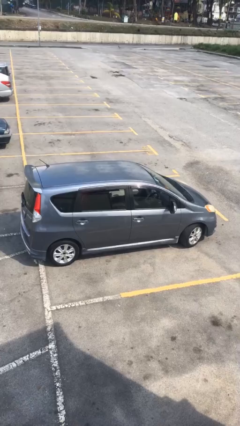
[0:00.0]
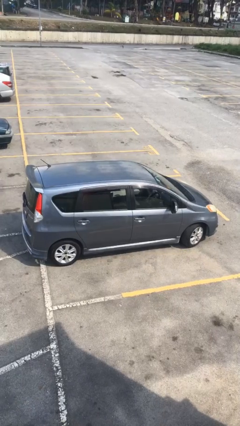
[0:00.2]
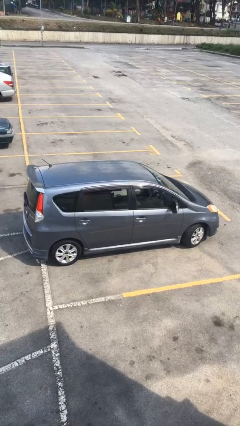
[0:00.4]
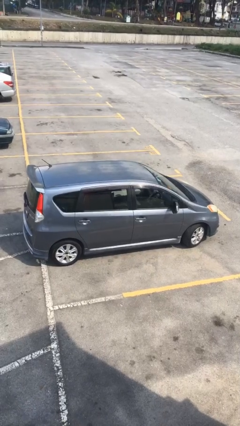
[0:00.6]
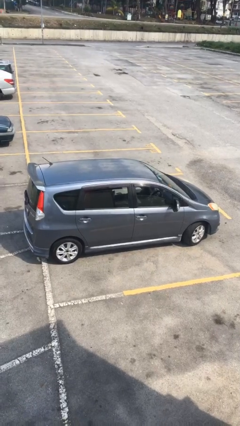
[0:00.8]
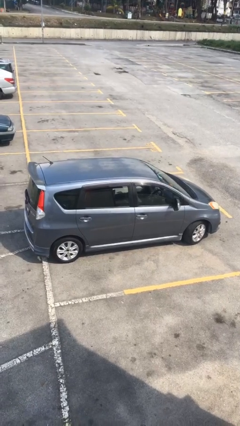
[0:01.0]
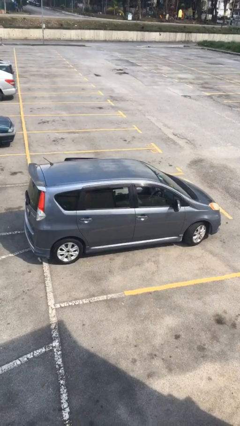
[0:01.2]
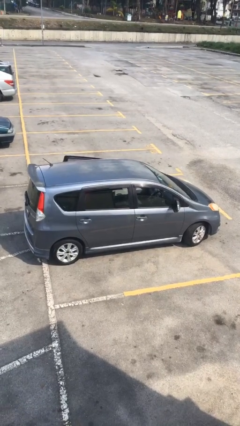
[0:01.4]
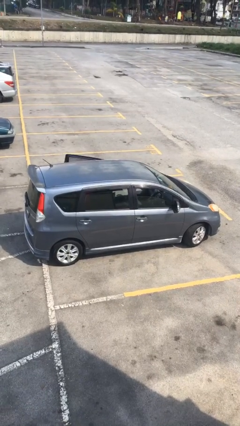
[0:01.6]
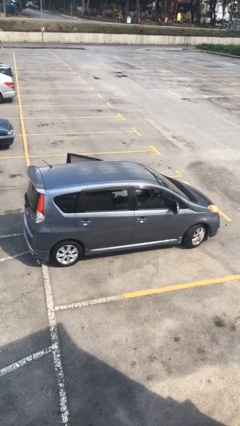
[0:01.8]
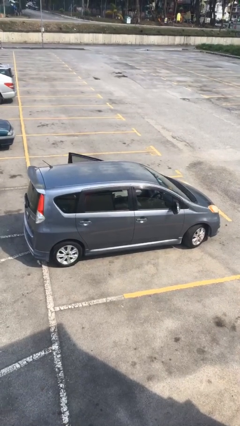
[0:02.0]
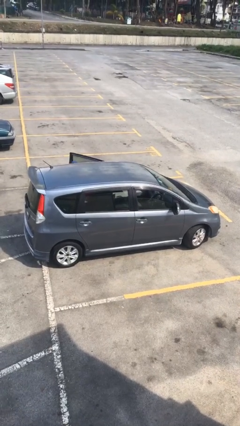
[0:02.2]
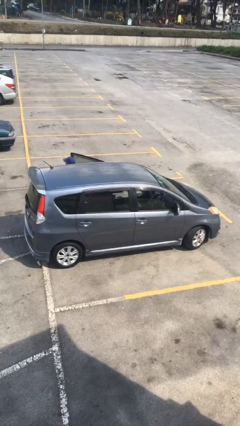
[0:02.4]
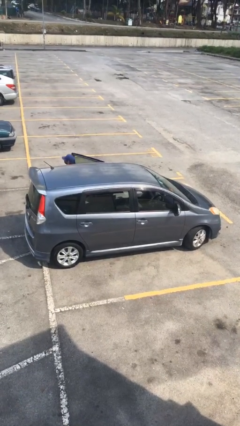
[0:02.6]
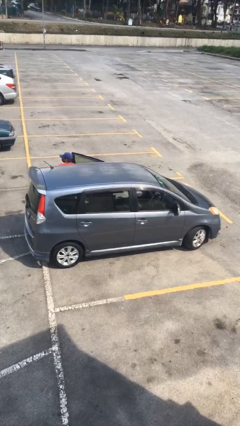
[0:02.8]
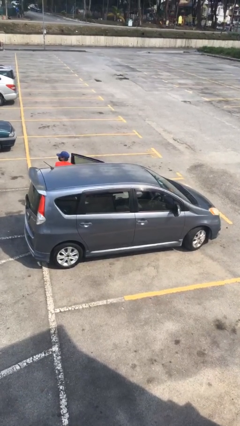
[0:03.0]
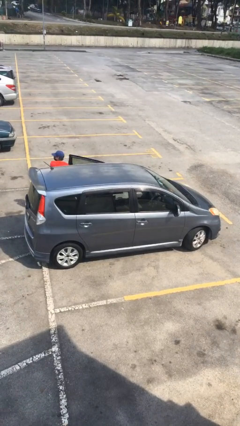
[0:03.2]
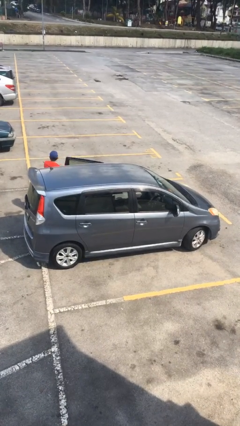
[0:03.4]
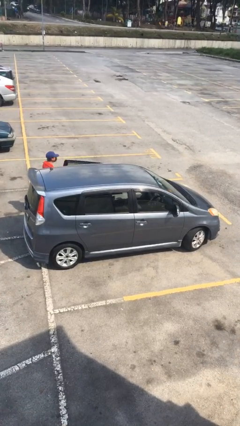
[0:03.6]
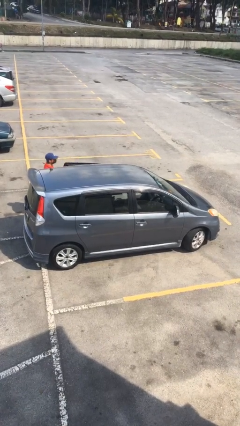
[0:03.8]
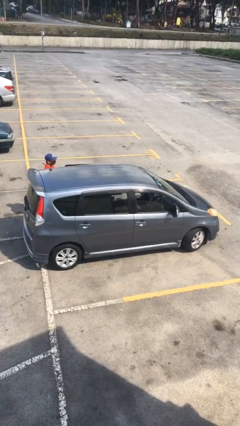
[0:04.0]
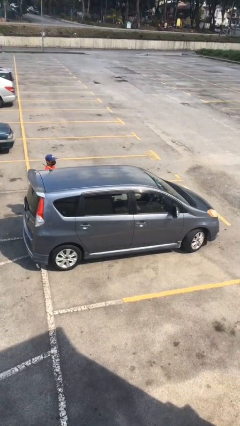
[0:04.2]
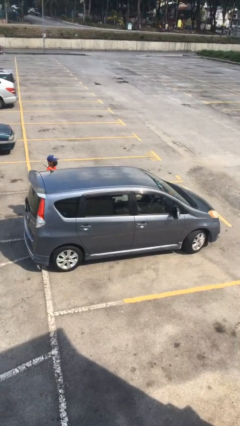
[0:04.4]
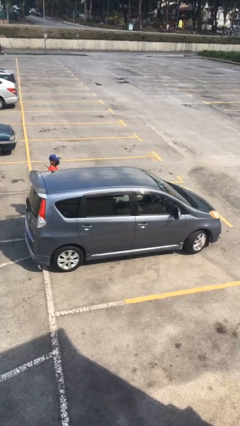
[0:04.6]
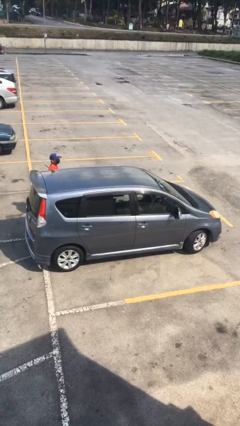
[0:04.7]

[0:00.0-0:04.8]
car drops off person

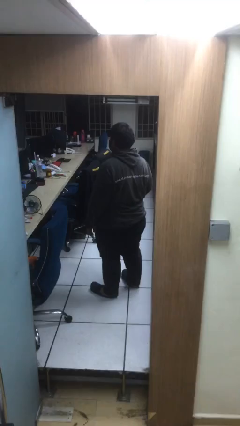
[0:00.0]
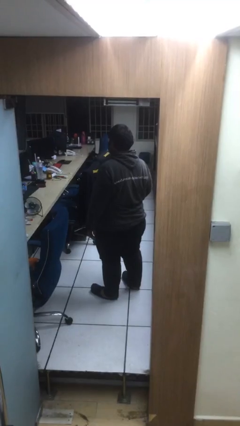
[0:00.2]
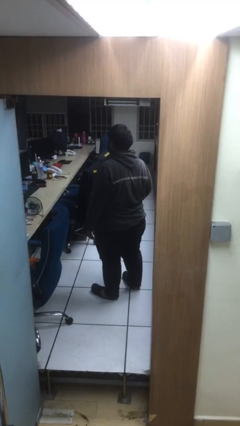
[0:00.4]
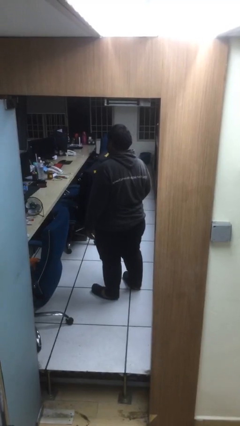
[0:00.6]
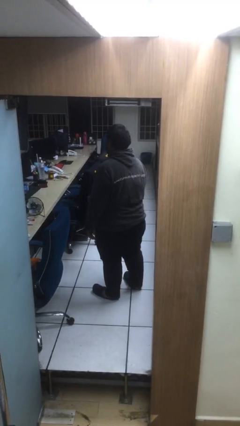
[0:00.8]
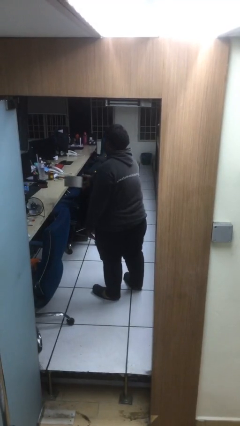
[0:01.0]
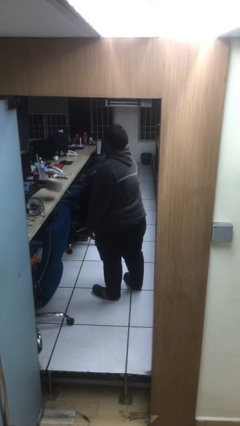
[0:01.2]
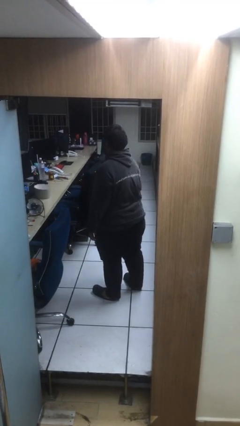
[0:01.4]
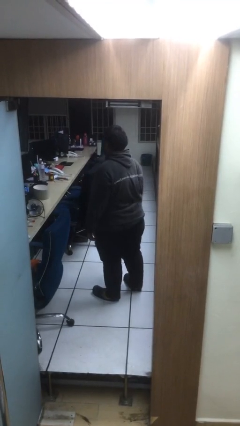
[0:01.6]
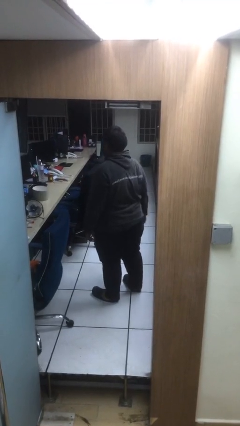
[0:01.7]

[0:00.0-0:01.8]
person throws object on table

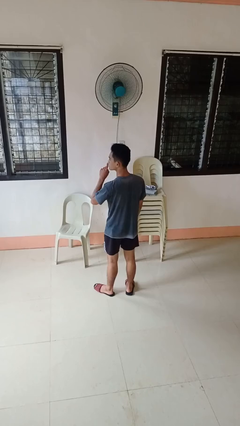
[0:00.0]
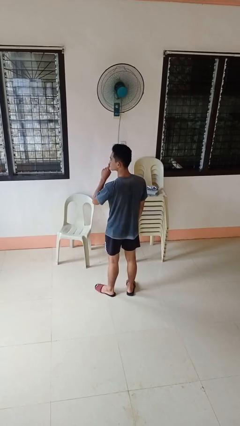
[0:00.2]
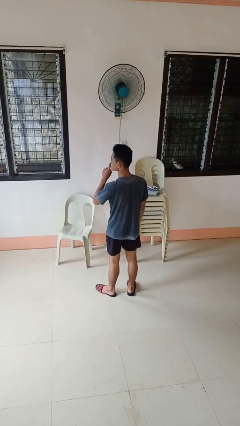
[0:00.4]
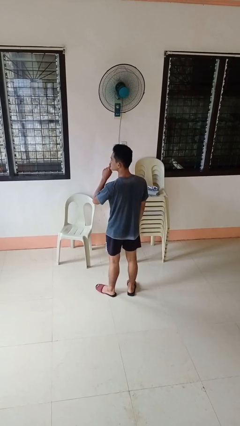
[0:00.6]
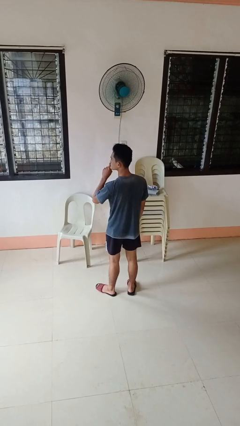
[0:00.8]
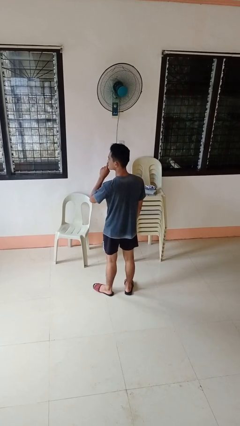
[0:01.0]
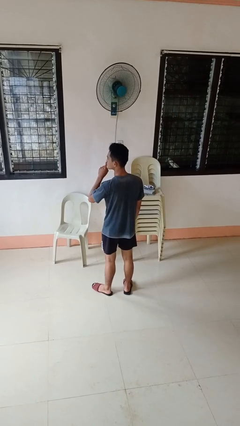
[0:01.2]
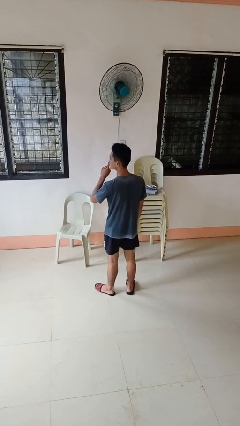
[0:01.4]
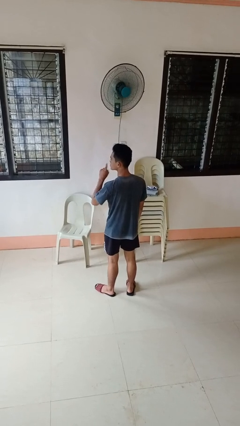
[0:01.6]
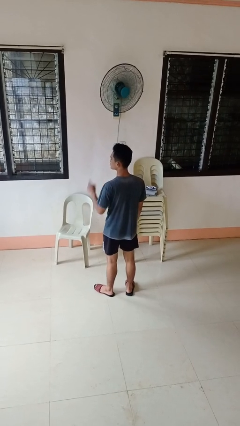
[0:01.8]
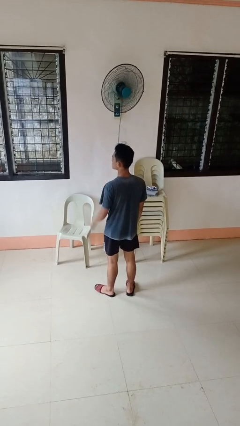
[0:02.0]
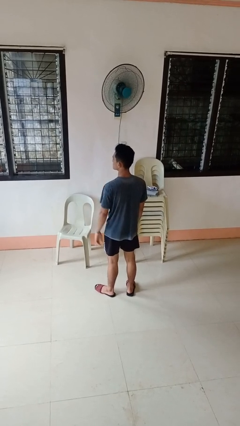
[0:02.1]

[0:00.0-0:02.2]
person gestures be quiet

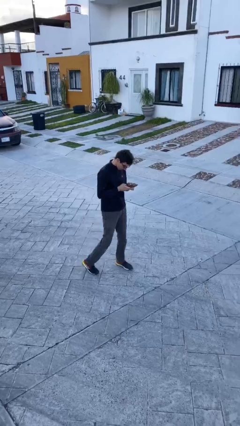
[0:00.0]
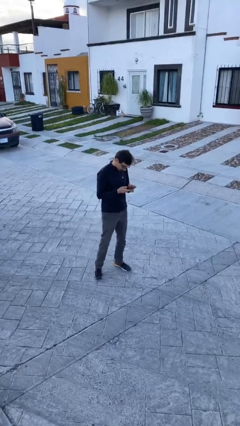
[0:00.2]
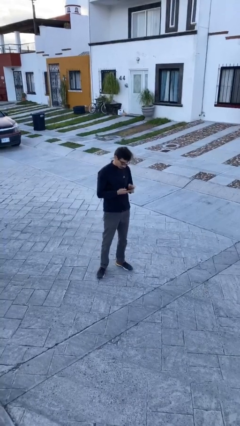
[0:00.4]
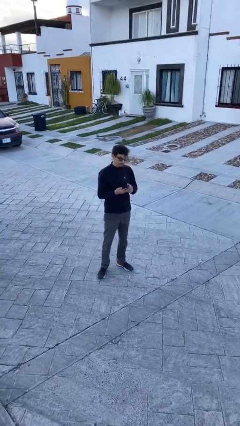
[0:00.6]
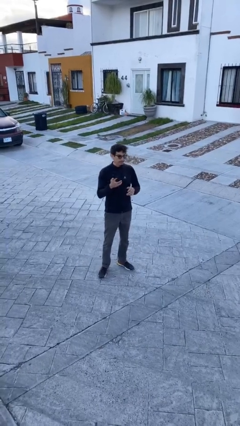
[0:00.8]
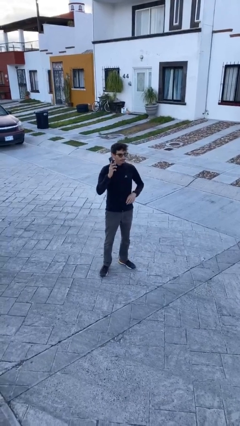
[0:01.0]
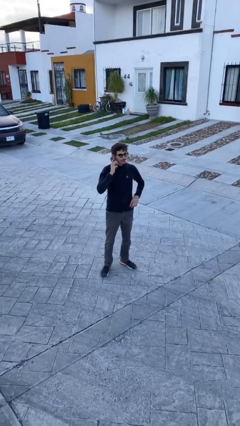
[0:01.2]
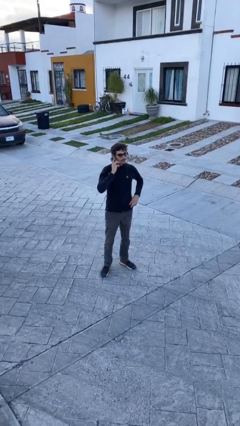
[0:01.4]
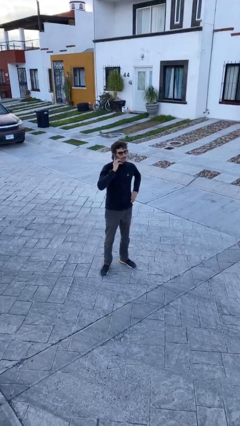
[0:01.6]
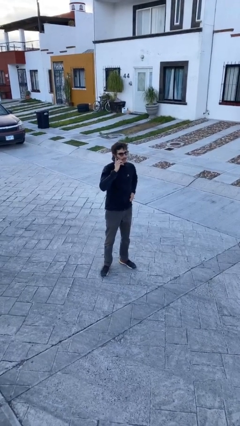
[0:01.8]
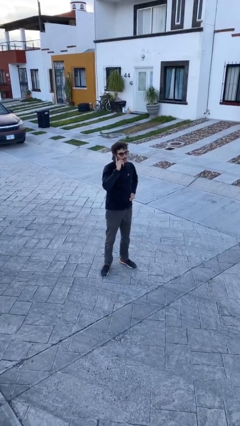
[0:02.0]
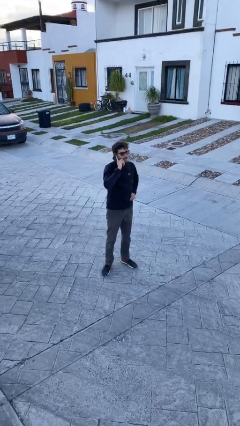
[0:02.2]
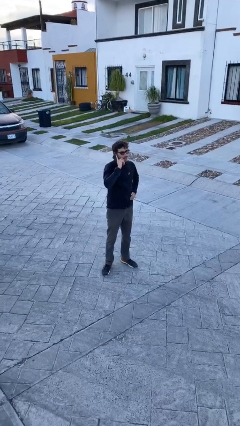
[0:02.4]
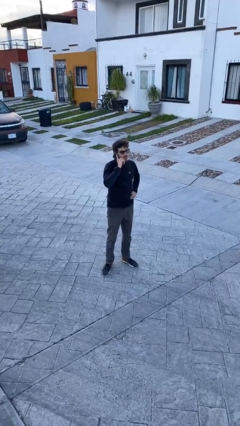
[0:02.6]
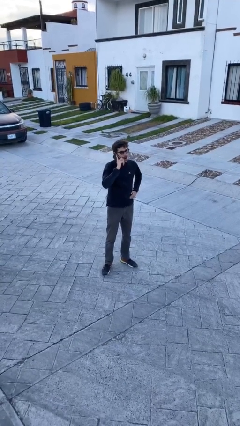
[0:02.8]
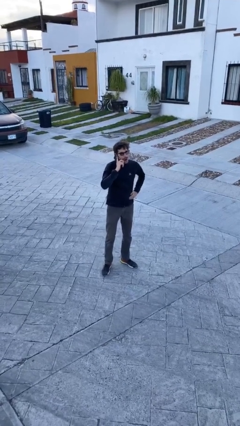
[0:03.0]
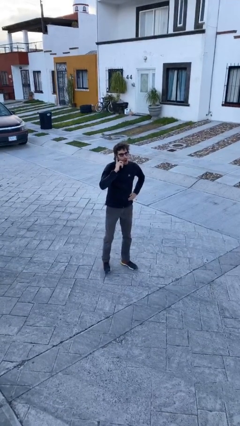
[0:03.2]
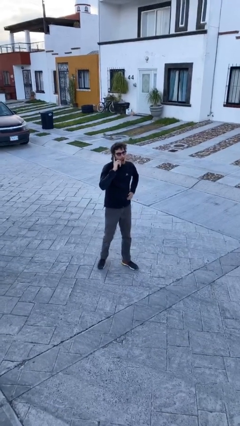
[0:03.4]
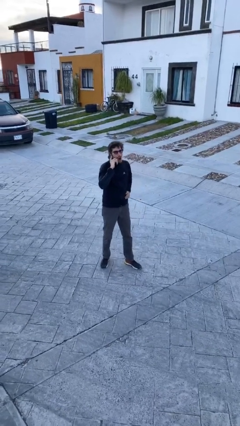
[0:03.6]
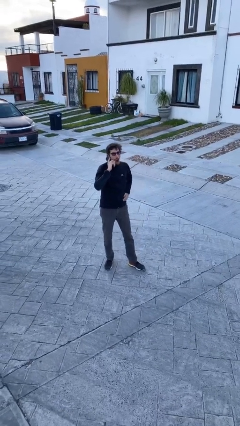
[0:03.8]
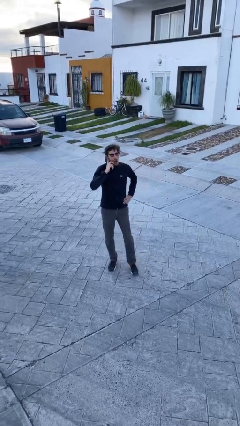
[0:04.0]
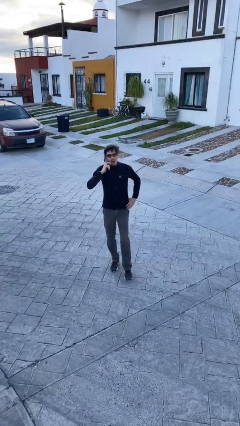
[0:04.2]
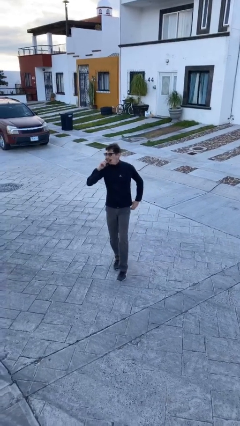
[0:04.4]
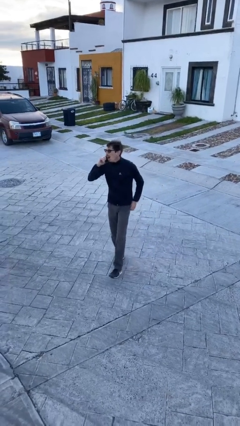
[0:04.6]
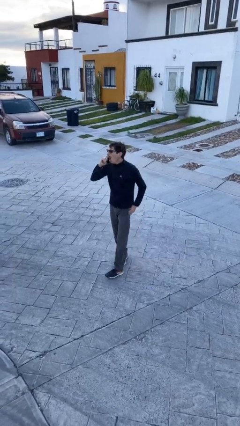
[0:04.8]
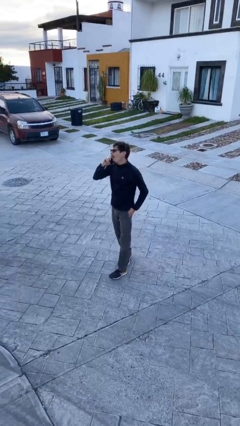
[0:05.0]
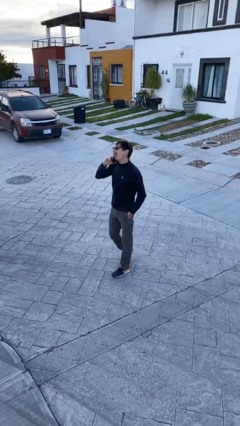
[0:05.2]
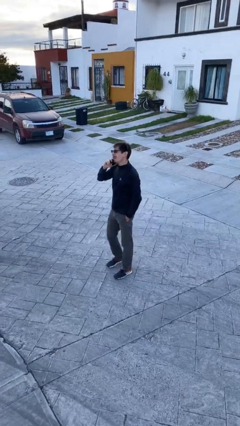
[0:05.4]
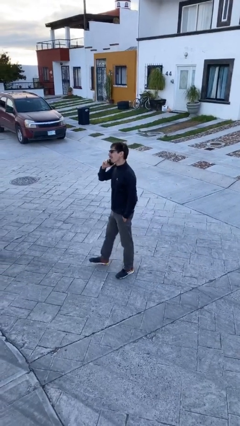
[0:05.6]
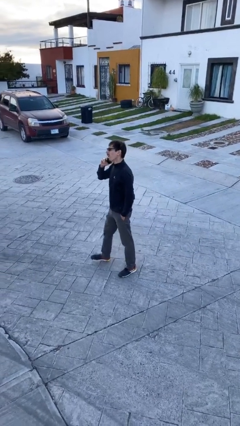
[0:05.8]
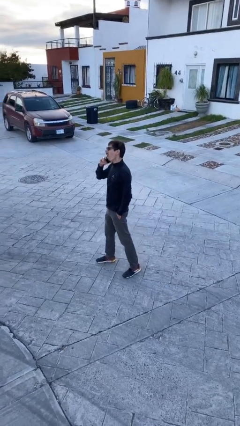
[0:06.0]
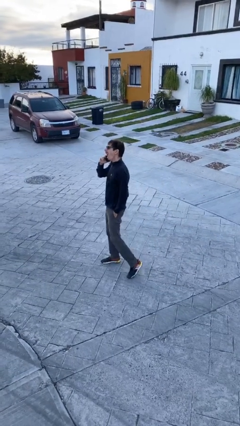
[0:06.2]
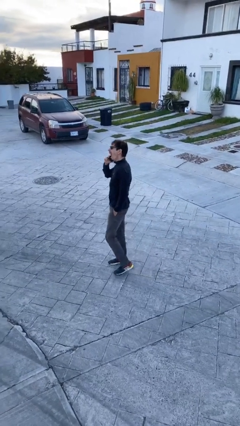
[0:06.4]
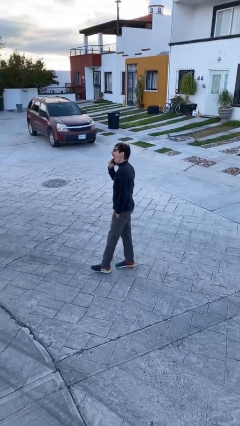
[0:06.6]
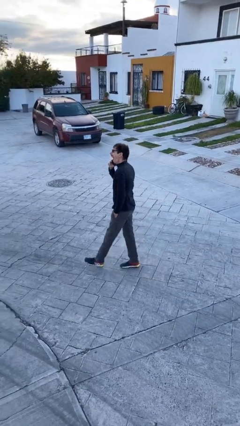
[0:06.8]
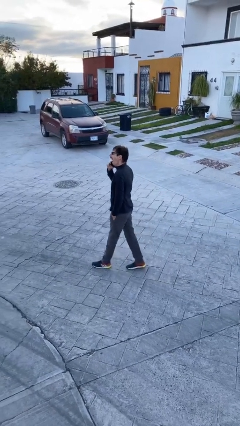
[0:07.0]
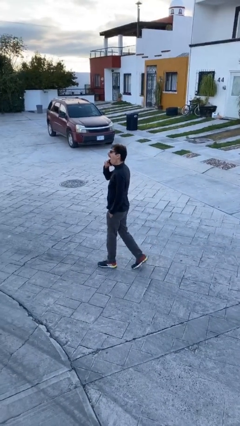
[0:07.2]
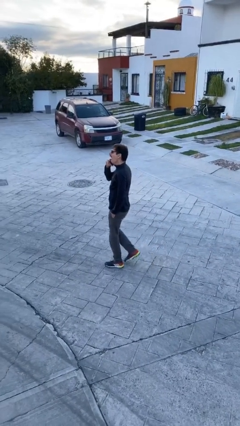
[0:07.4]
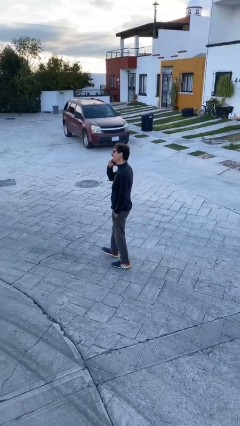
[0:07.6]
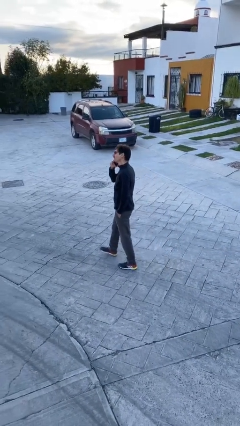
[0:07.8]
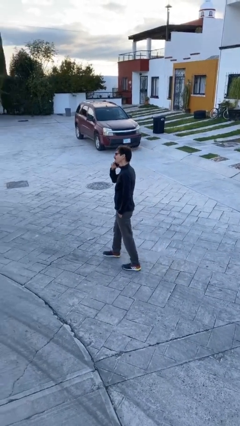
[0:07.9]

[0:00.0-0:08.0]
person talks on phone

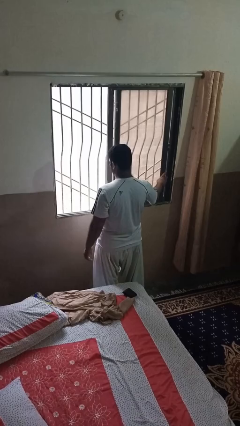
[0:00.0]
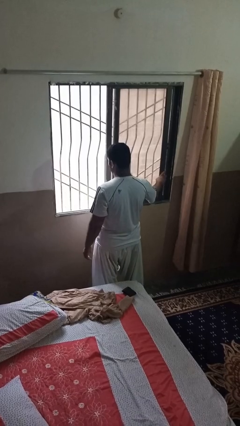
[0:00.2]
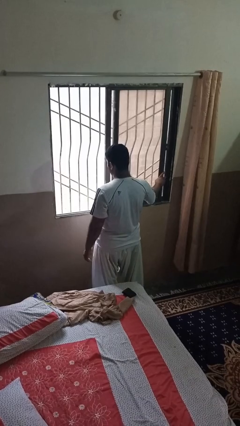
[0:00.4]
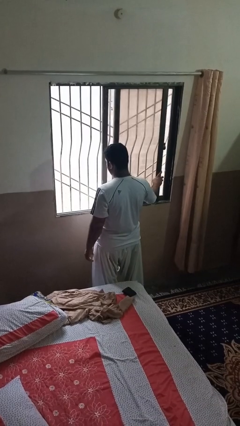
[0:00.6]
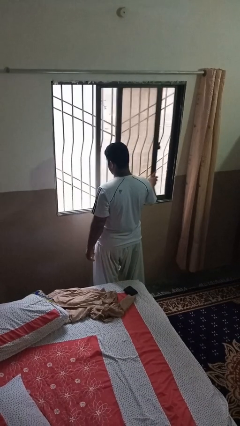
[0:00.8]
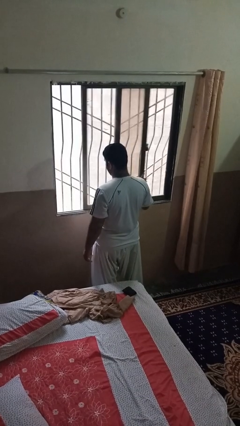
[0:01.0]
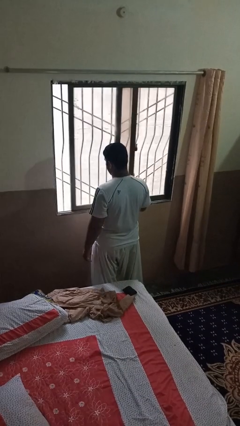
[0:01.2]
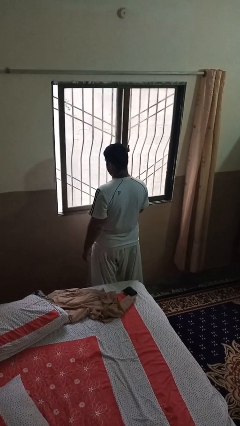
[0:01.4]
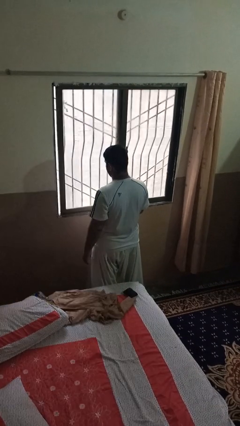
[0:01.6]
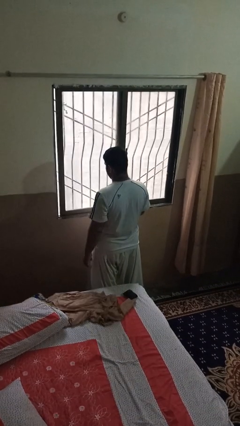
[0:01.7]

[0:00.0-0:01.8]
person closes home window
